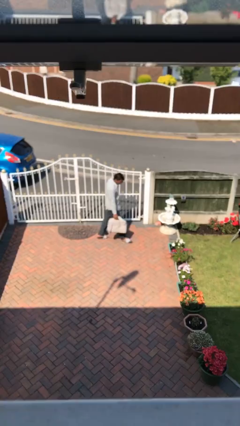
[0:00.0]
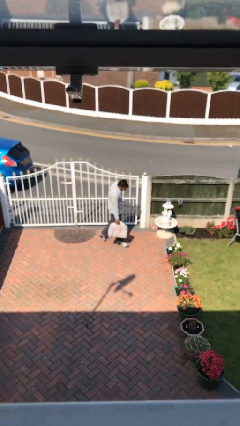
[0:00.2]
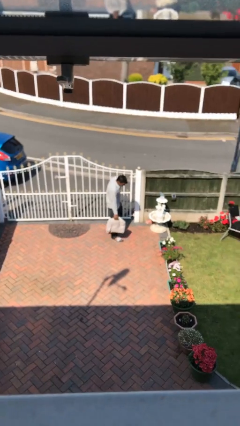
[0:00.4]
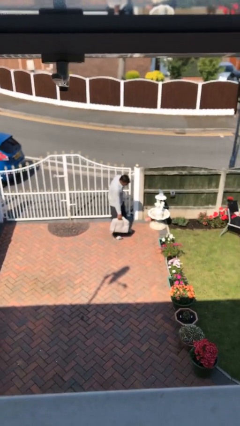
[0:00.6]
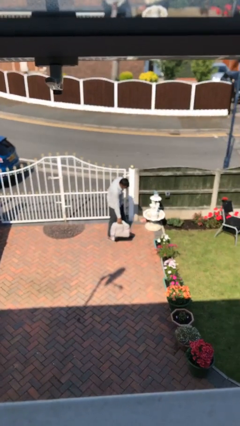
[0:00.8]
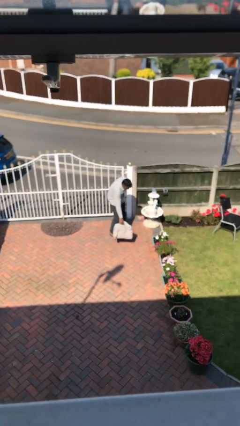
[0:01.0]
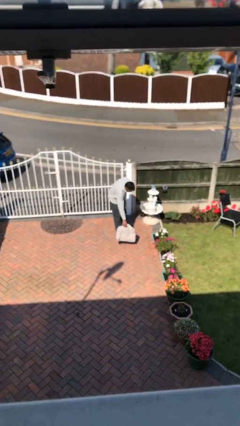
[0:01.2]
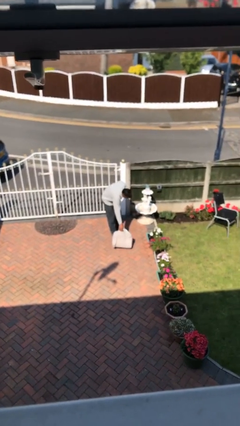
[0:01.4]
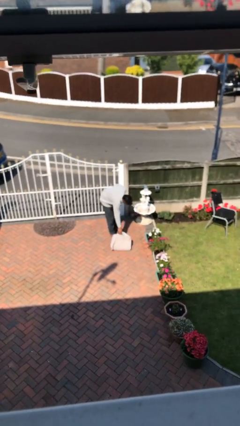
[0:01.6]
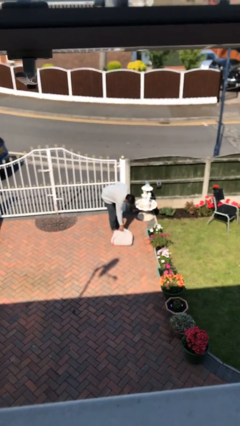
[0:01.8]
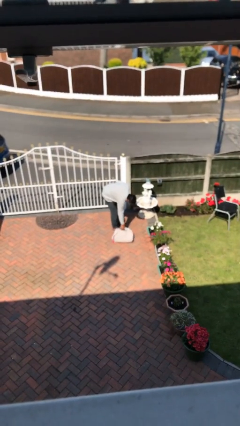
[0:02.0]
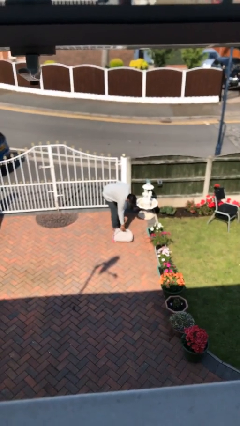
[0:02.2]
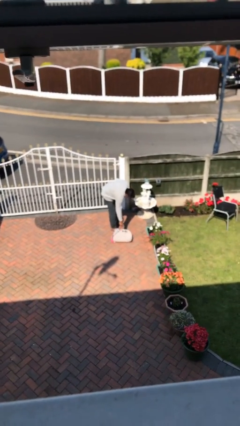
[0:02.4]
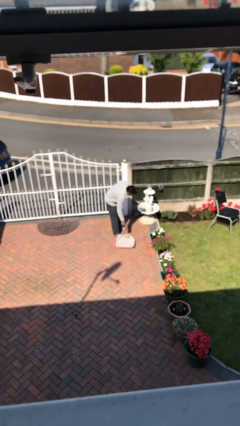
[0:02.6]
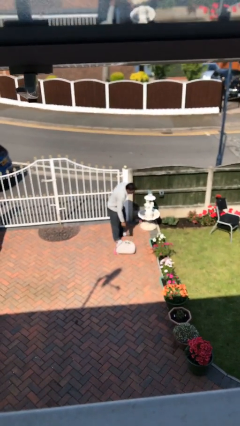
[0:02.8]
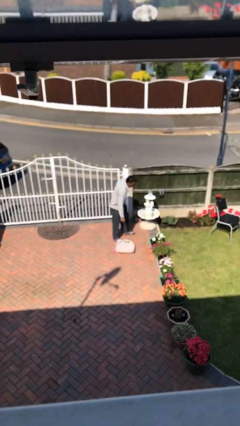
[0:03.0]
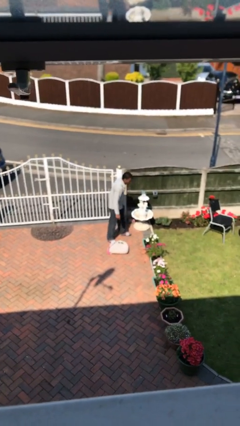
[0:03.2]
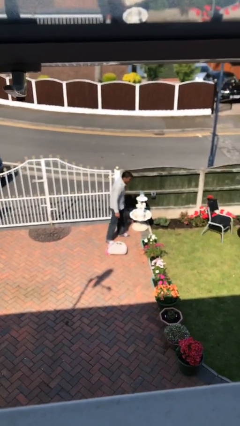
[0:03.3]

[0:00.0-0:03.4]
person puts down object on floor

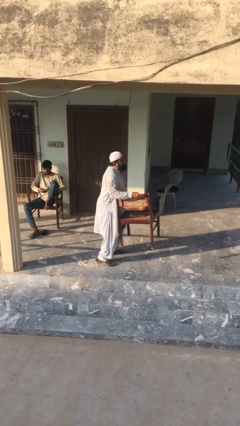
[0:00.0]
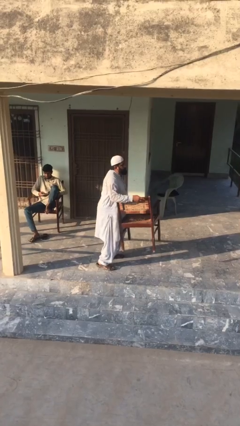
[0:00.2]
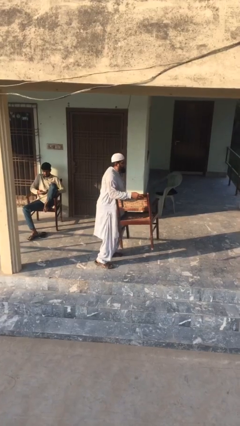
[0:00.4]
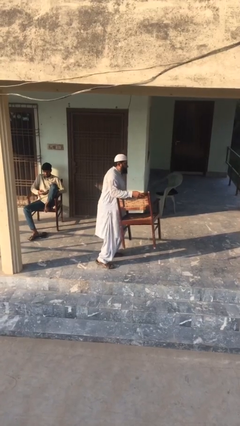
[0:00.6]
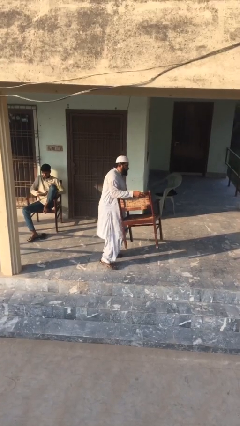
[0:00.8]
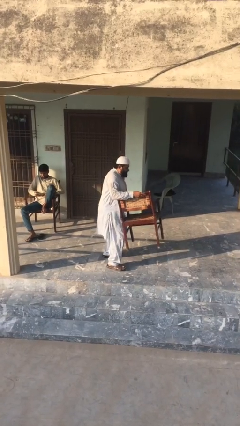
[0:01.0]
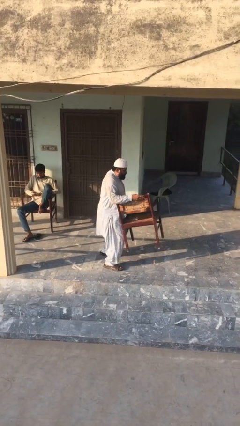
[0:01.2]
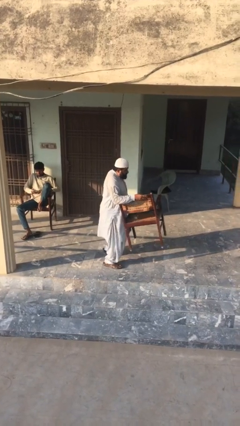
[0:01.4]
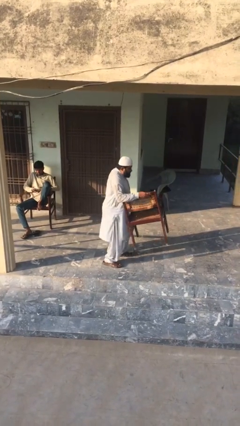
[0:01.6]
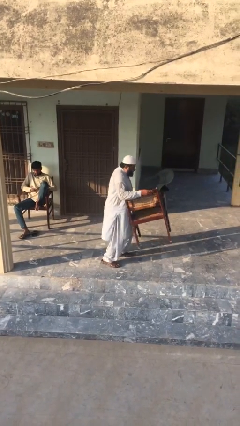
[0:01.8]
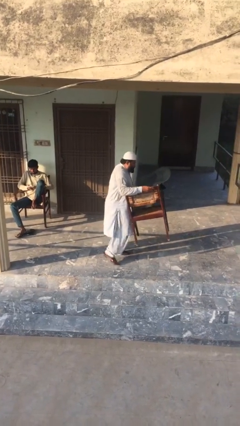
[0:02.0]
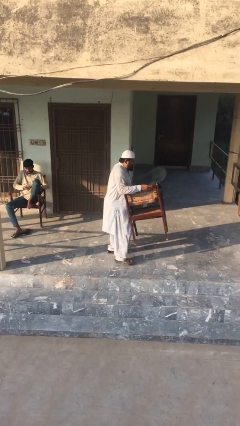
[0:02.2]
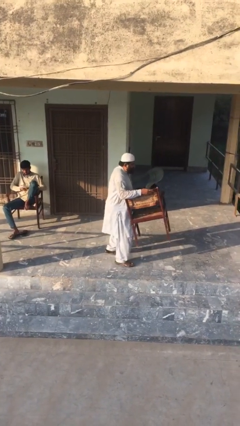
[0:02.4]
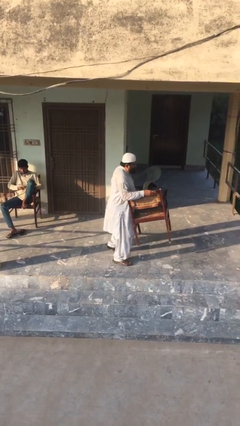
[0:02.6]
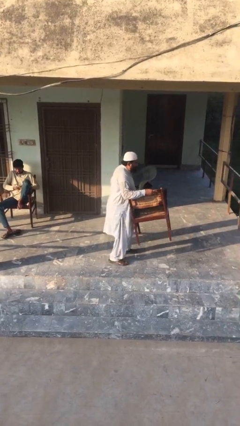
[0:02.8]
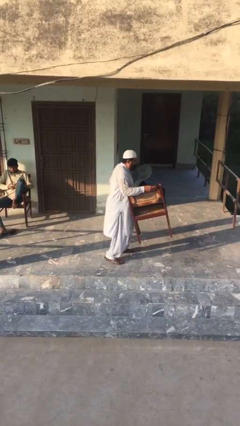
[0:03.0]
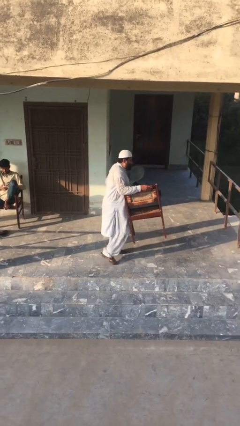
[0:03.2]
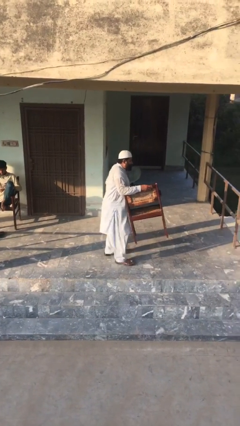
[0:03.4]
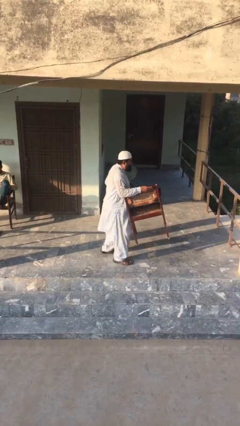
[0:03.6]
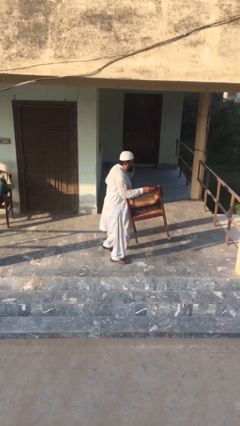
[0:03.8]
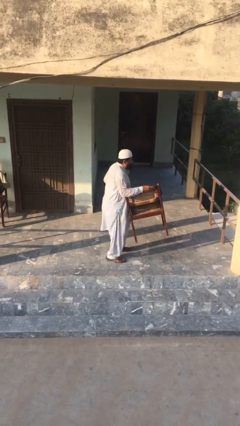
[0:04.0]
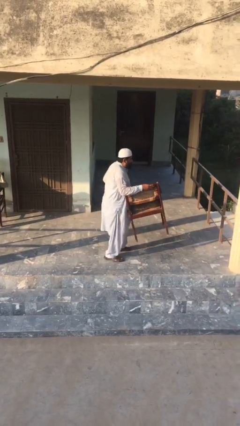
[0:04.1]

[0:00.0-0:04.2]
person carries heavy object

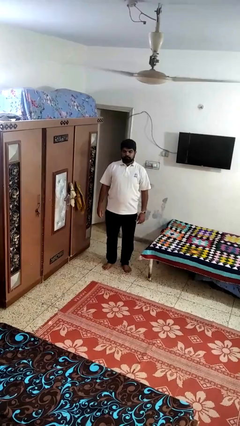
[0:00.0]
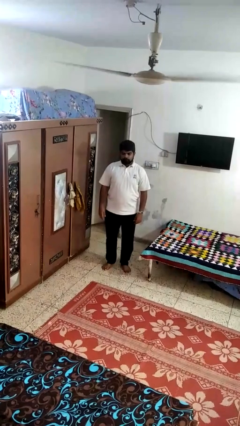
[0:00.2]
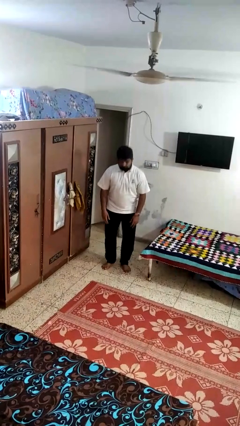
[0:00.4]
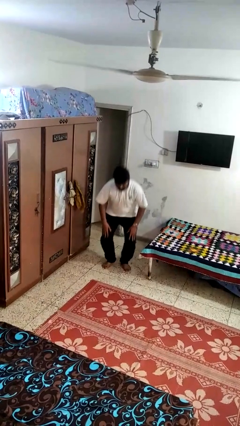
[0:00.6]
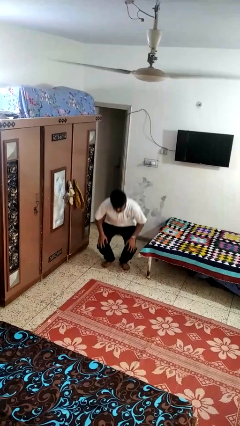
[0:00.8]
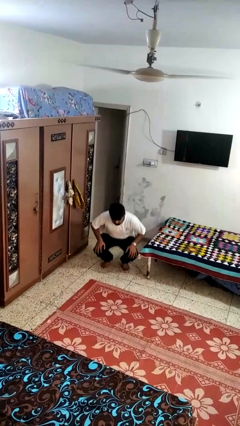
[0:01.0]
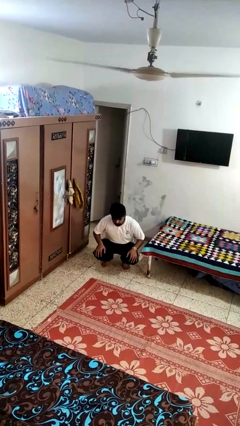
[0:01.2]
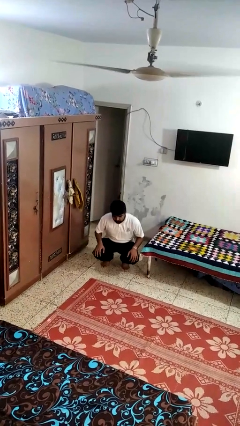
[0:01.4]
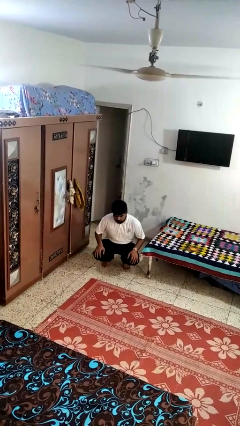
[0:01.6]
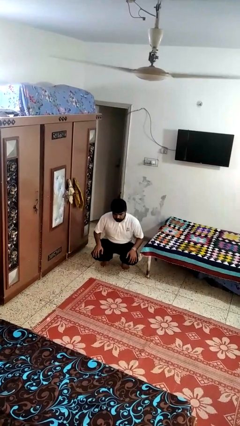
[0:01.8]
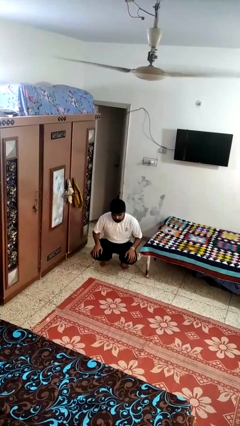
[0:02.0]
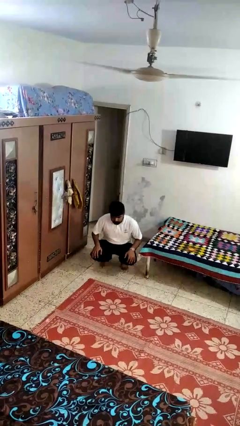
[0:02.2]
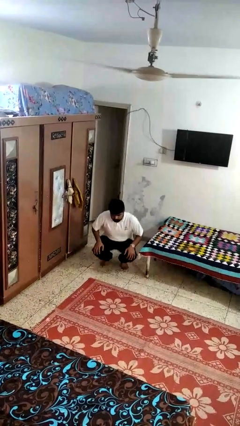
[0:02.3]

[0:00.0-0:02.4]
person squats

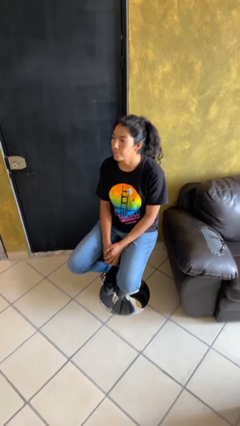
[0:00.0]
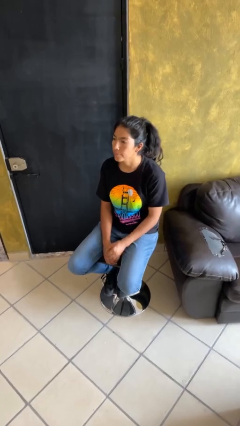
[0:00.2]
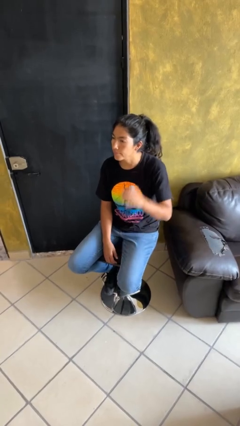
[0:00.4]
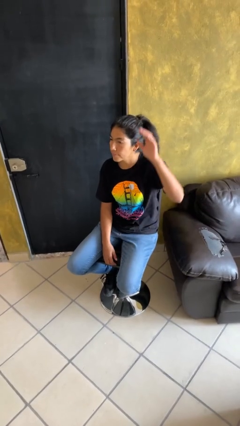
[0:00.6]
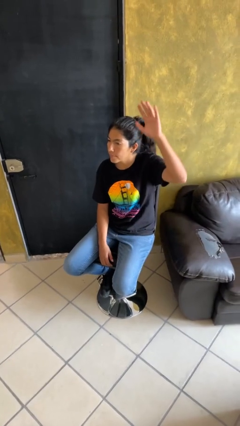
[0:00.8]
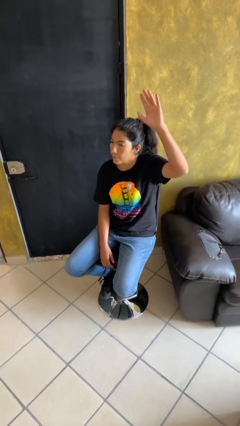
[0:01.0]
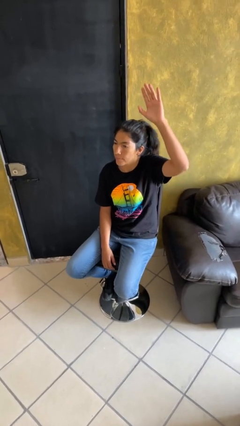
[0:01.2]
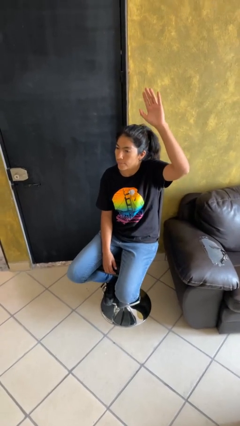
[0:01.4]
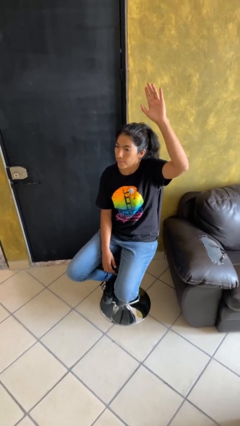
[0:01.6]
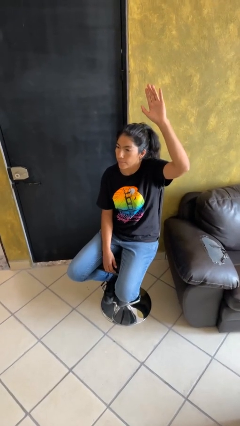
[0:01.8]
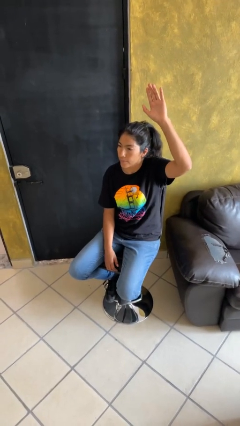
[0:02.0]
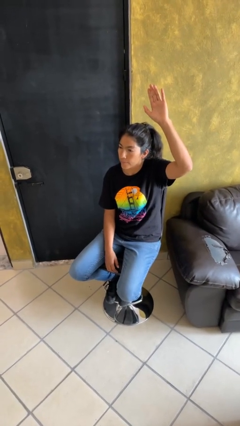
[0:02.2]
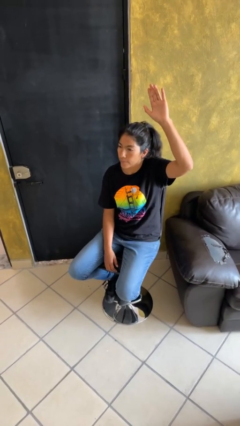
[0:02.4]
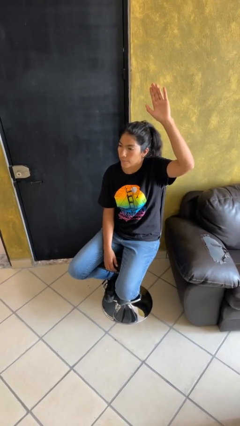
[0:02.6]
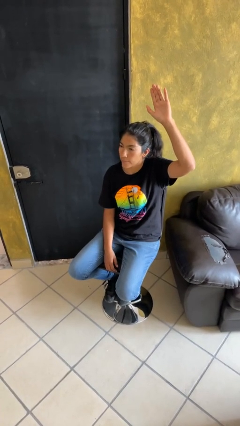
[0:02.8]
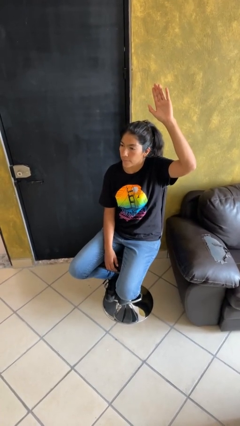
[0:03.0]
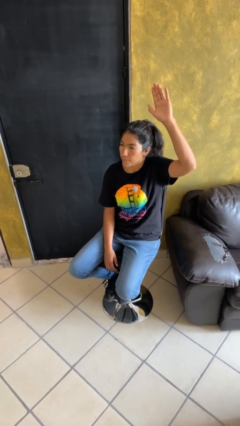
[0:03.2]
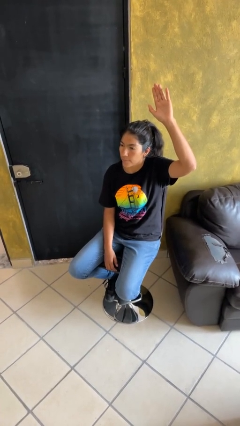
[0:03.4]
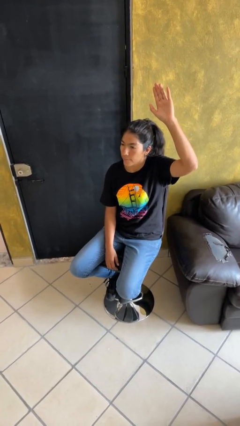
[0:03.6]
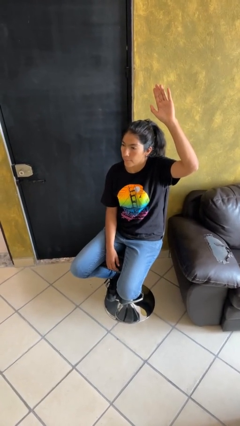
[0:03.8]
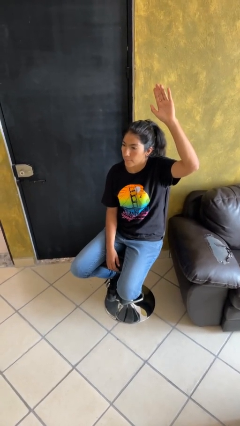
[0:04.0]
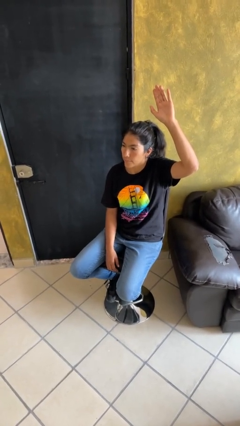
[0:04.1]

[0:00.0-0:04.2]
person gestures raise hand

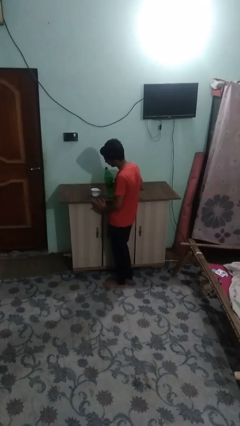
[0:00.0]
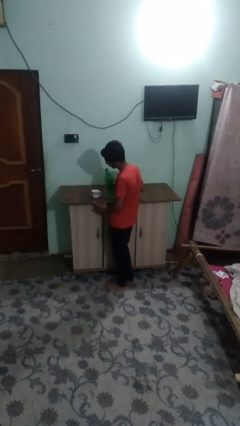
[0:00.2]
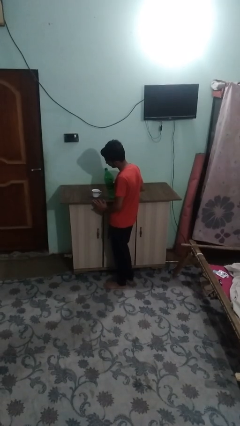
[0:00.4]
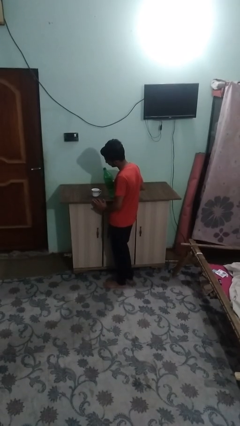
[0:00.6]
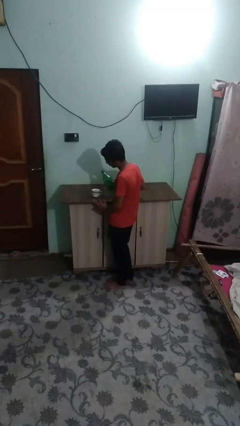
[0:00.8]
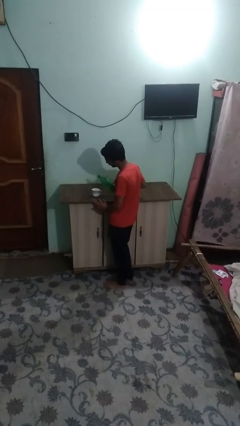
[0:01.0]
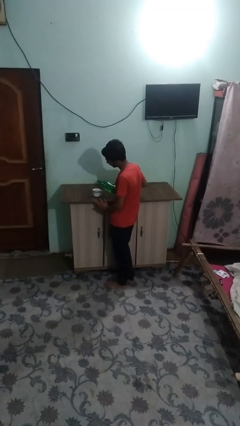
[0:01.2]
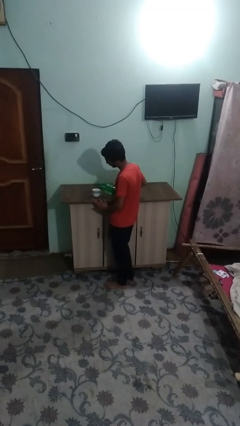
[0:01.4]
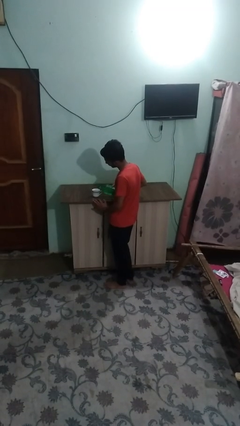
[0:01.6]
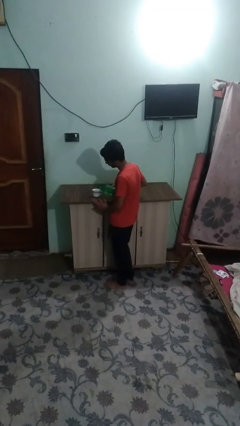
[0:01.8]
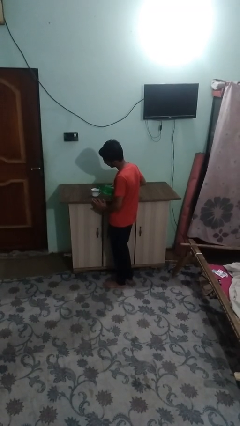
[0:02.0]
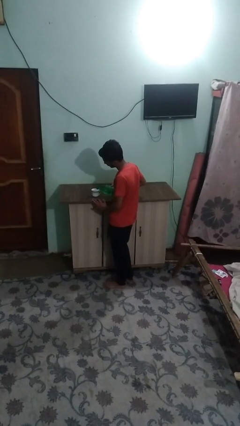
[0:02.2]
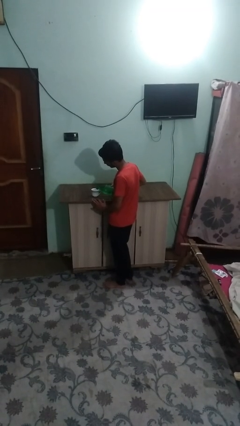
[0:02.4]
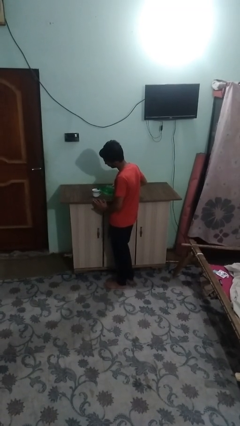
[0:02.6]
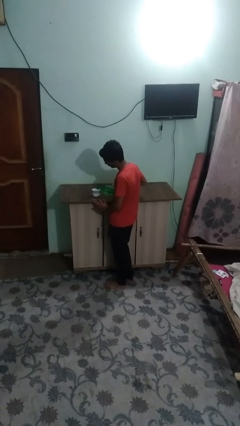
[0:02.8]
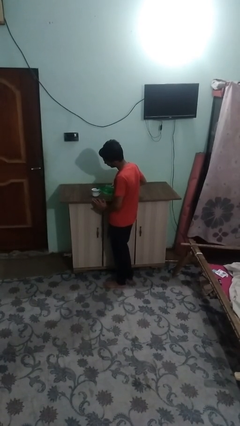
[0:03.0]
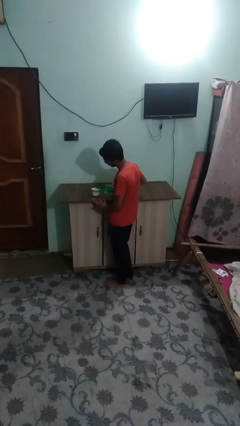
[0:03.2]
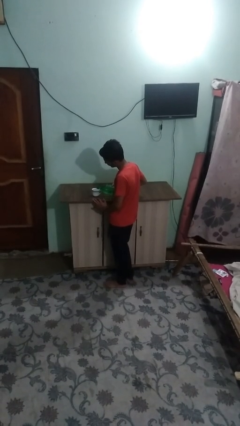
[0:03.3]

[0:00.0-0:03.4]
person pours liquid into cup
